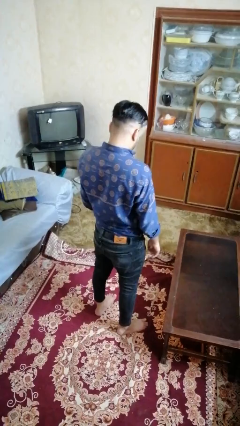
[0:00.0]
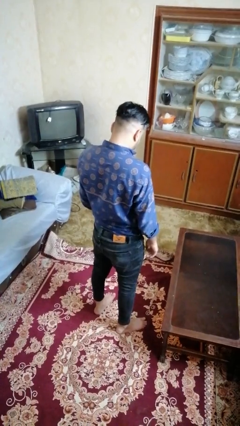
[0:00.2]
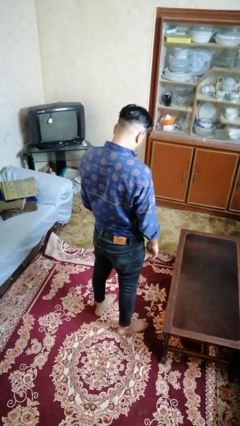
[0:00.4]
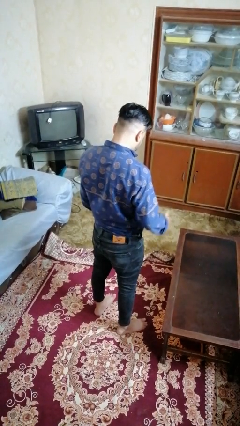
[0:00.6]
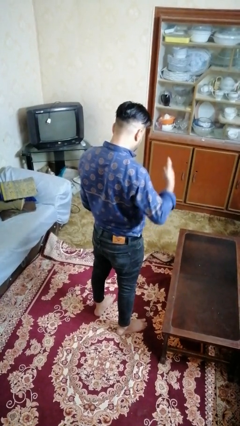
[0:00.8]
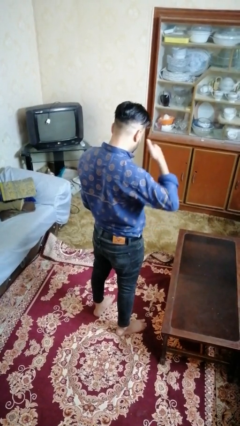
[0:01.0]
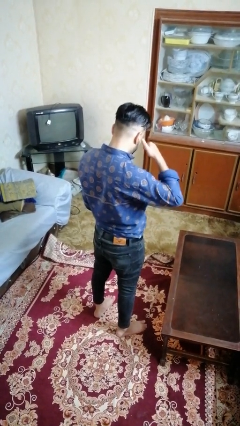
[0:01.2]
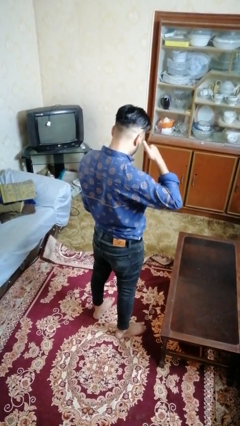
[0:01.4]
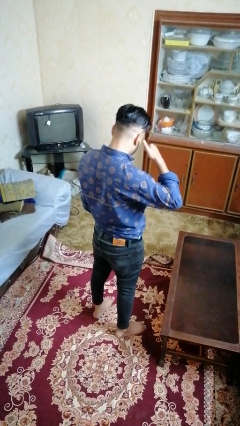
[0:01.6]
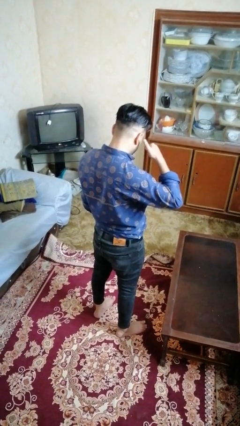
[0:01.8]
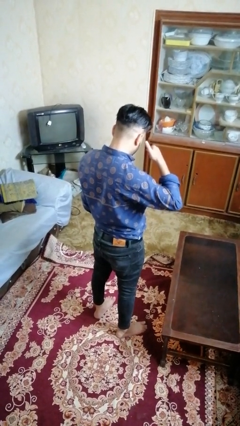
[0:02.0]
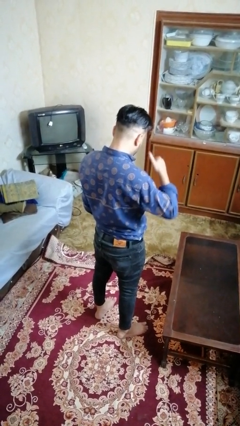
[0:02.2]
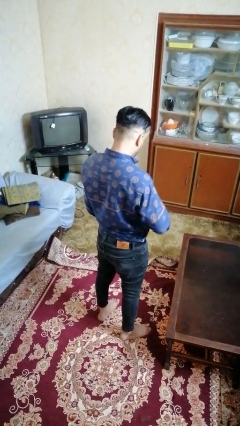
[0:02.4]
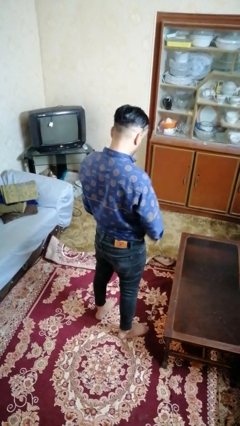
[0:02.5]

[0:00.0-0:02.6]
person gestures call me

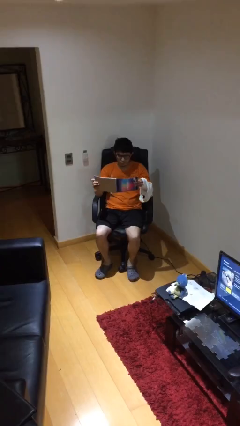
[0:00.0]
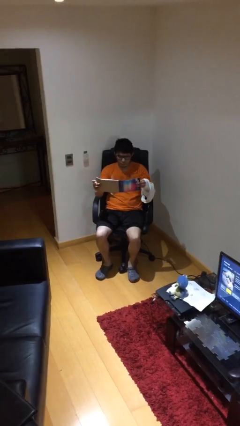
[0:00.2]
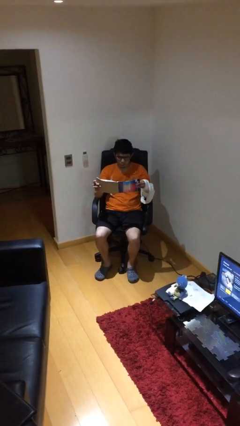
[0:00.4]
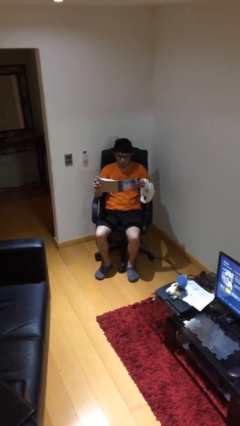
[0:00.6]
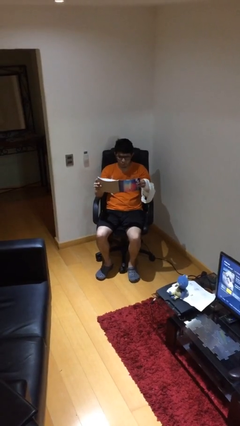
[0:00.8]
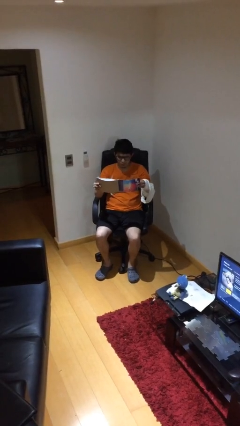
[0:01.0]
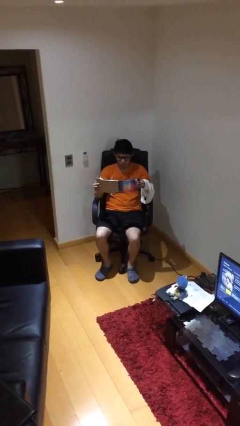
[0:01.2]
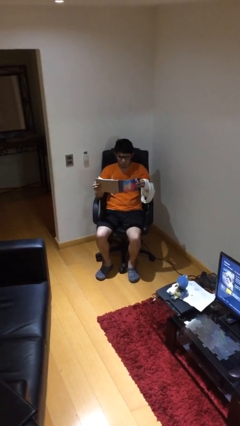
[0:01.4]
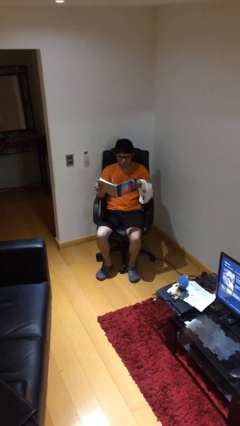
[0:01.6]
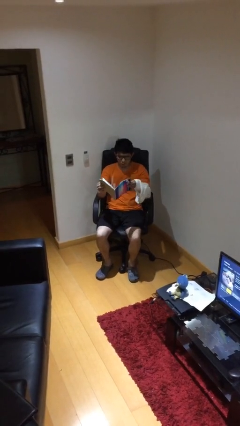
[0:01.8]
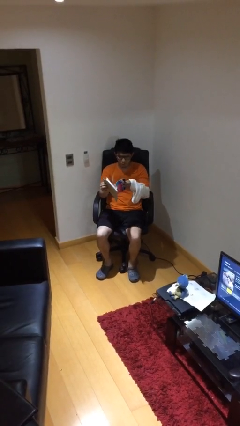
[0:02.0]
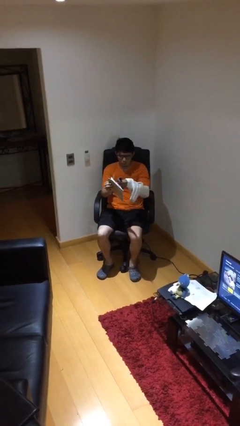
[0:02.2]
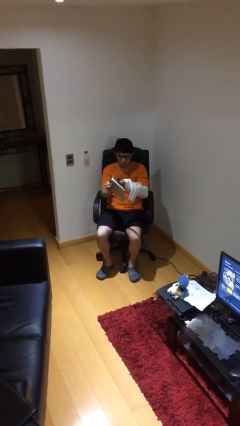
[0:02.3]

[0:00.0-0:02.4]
person reads document

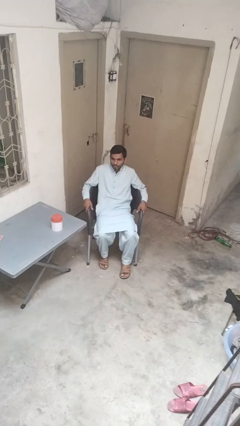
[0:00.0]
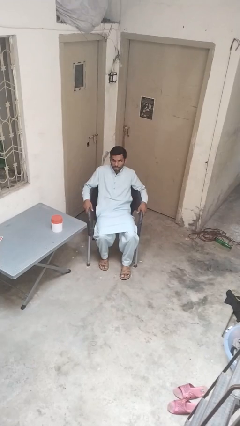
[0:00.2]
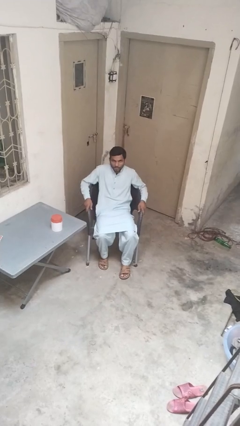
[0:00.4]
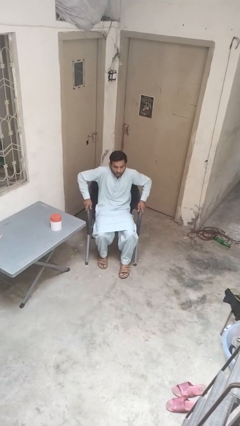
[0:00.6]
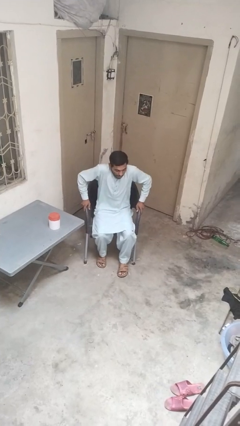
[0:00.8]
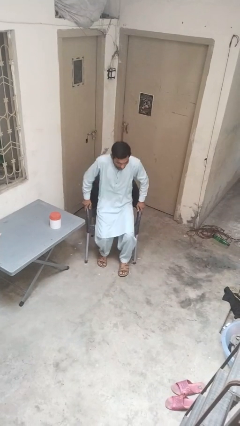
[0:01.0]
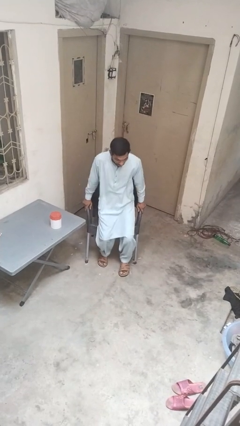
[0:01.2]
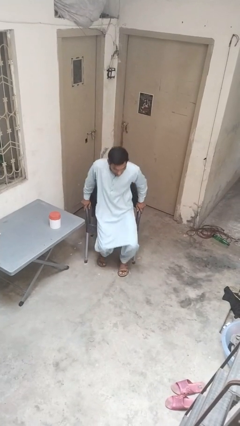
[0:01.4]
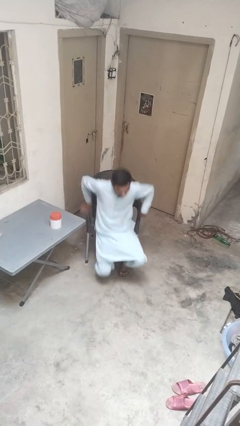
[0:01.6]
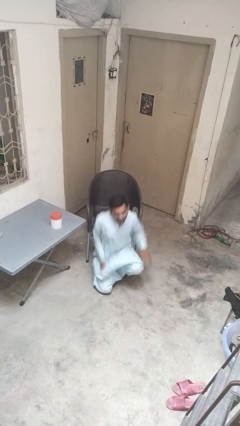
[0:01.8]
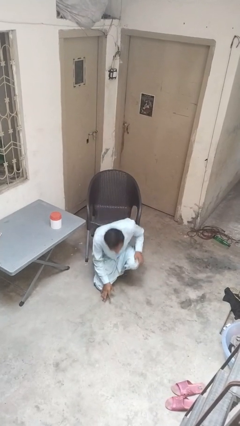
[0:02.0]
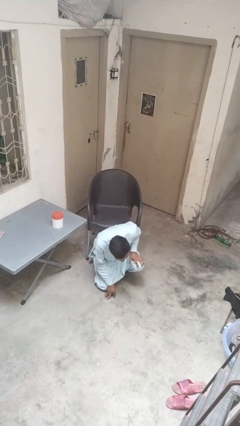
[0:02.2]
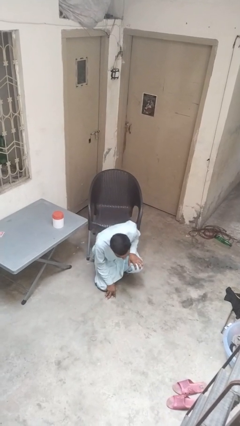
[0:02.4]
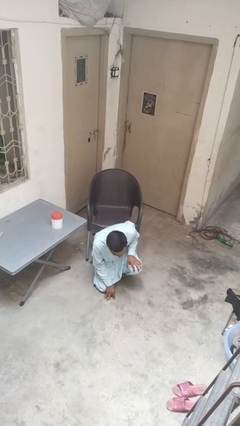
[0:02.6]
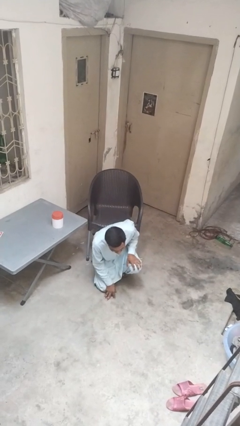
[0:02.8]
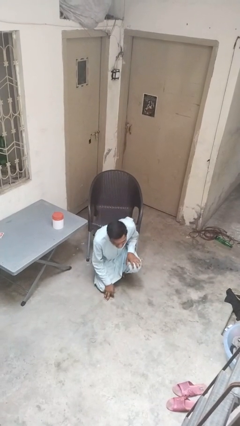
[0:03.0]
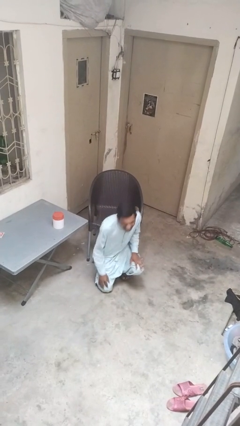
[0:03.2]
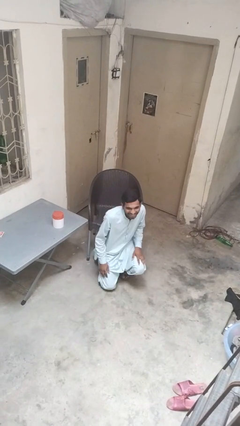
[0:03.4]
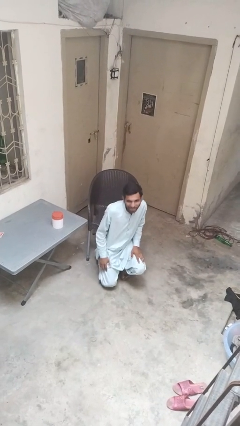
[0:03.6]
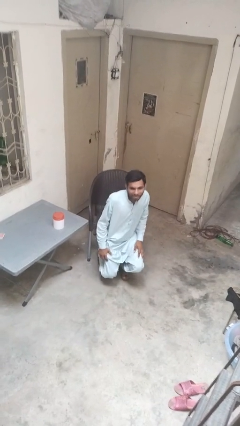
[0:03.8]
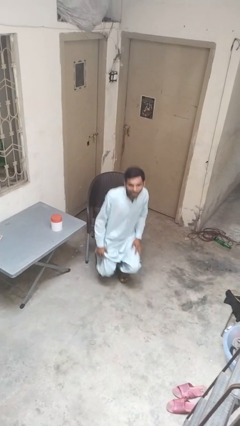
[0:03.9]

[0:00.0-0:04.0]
person falls from chair

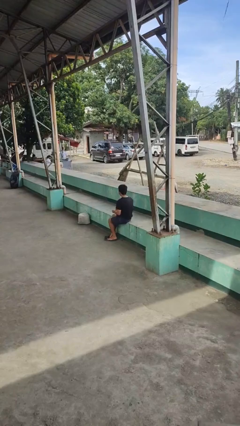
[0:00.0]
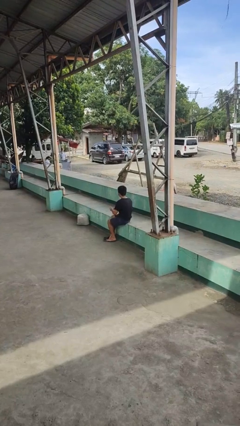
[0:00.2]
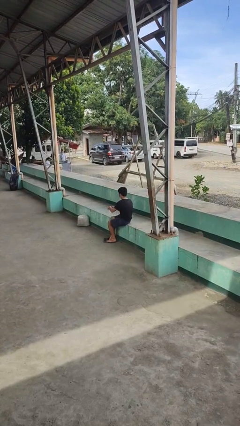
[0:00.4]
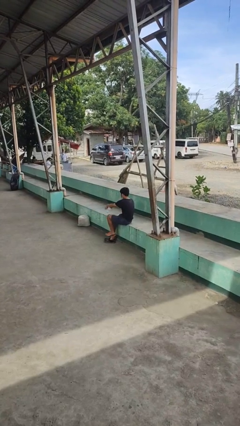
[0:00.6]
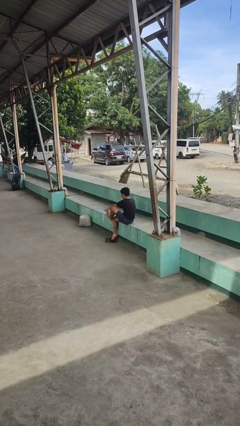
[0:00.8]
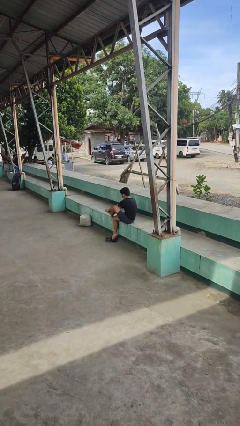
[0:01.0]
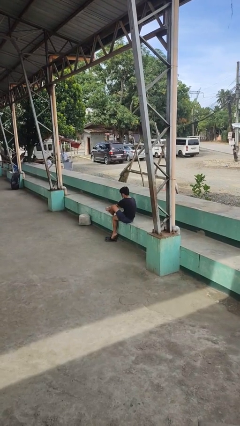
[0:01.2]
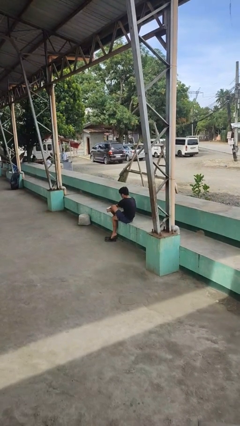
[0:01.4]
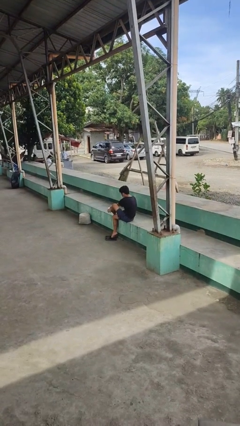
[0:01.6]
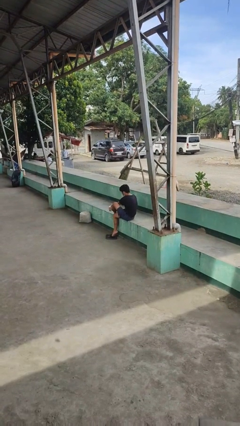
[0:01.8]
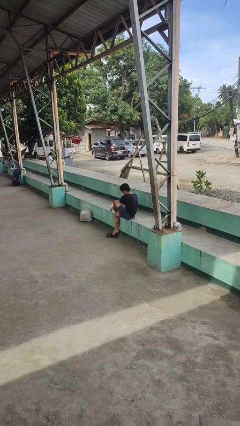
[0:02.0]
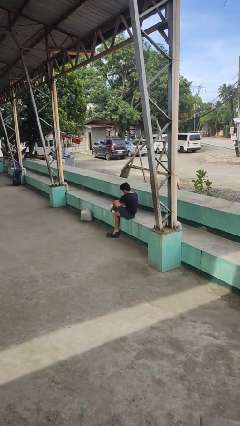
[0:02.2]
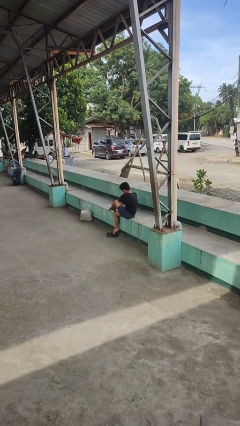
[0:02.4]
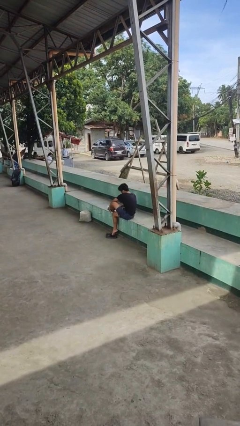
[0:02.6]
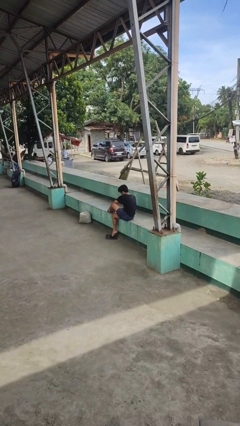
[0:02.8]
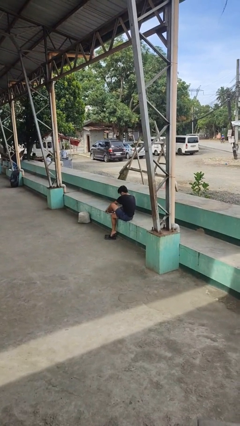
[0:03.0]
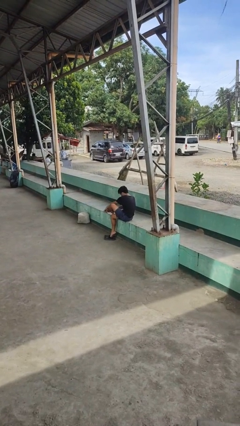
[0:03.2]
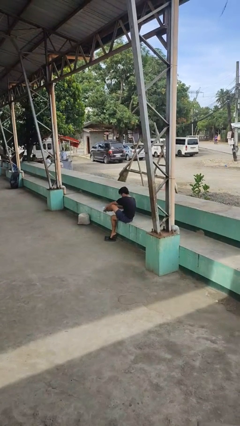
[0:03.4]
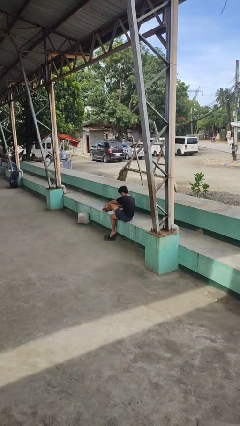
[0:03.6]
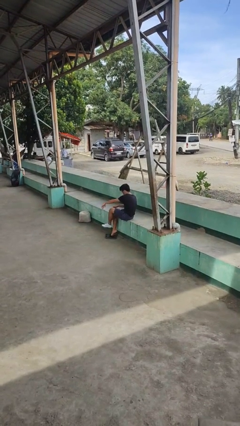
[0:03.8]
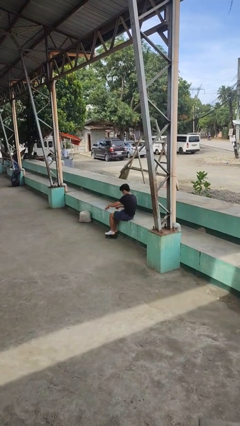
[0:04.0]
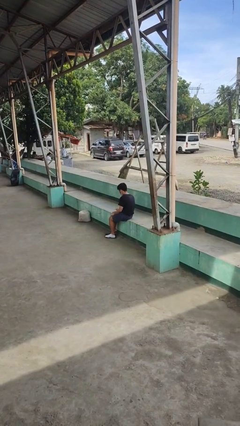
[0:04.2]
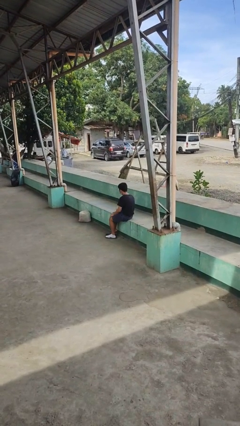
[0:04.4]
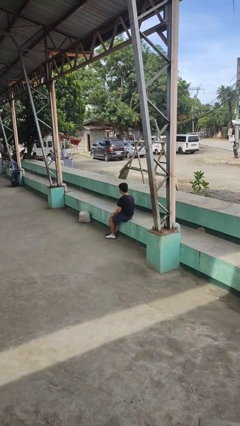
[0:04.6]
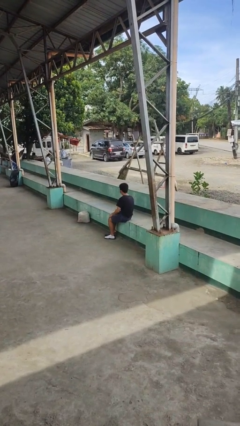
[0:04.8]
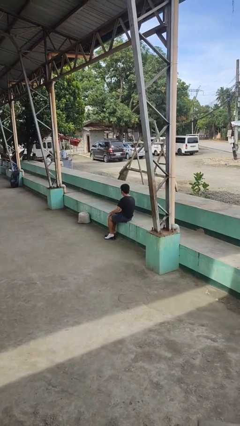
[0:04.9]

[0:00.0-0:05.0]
person puts on socks

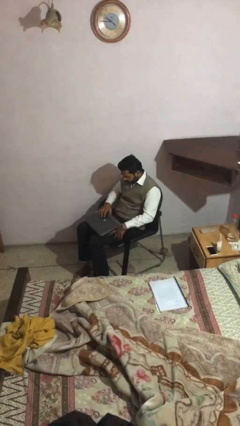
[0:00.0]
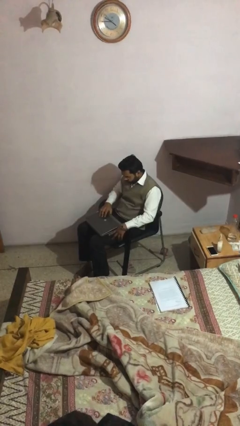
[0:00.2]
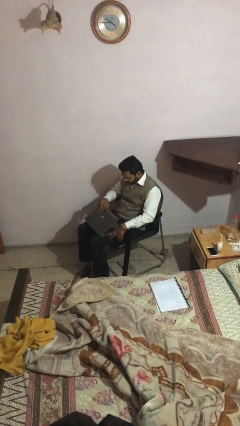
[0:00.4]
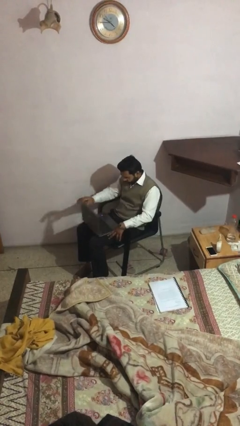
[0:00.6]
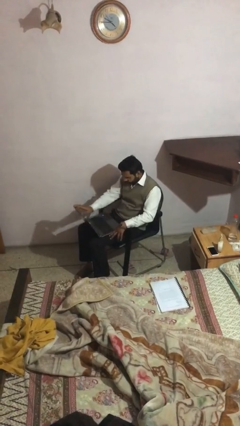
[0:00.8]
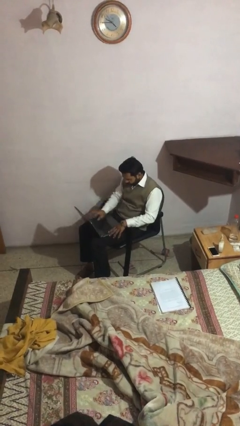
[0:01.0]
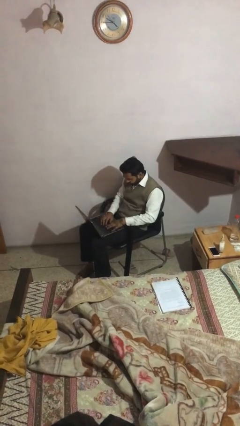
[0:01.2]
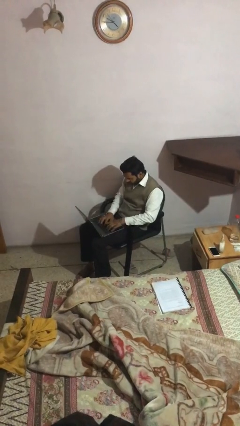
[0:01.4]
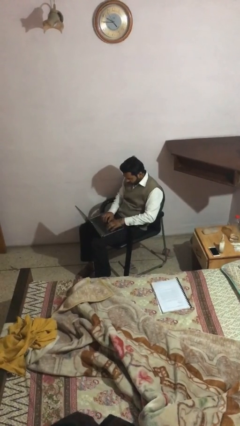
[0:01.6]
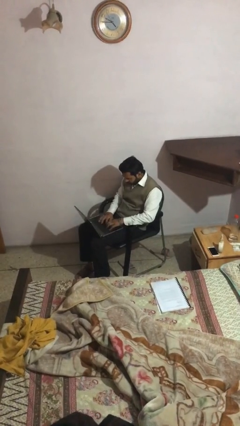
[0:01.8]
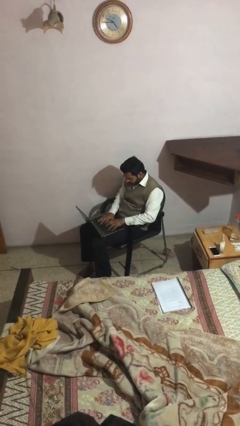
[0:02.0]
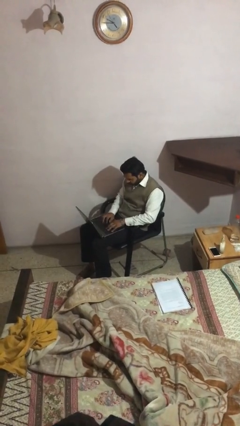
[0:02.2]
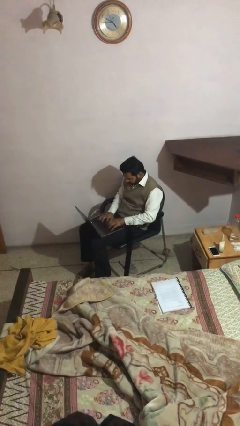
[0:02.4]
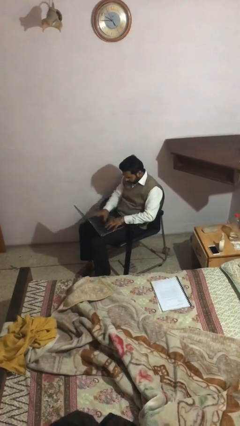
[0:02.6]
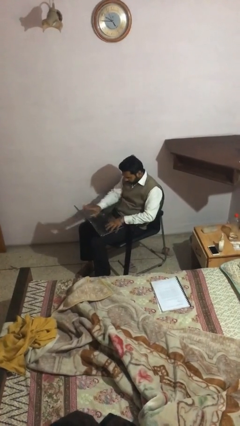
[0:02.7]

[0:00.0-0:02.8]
person interacts with laptop

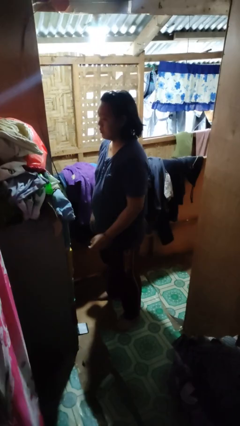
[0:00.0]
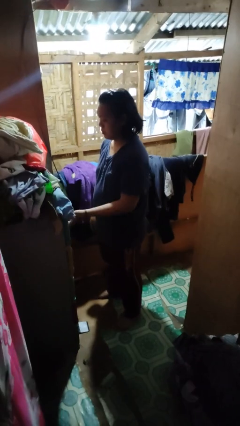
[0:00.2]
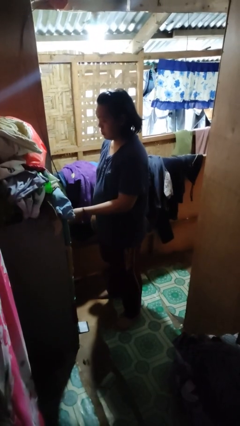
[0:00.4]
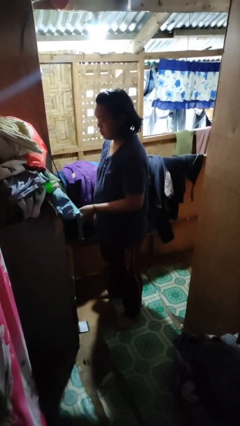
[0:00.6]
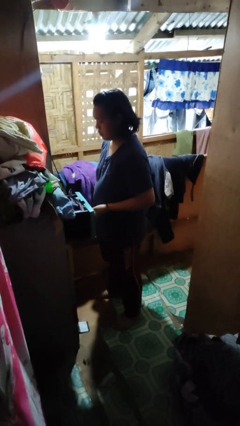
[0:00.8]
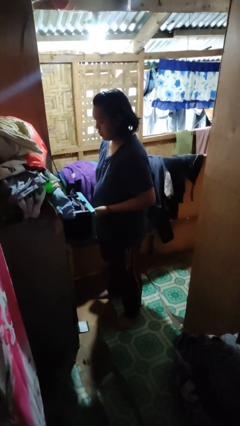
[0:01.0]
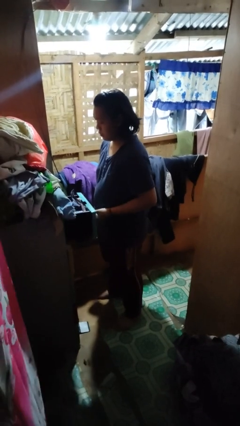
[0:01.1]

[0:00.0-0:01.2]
person opens dresser drawer
